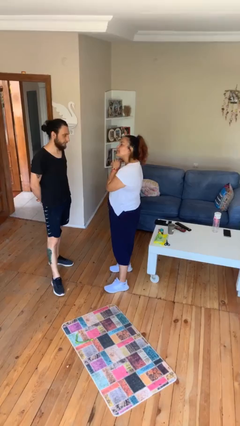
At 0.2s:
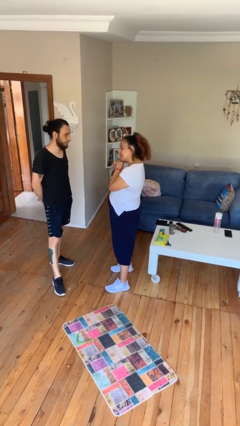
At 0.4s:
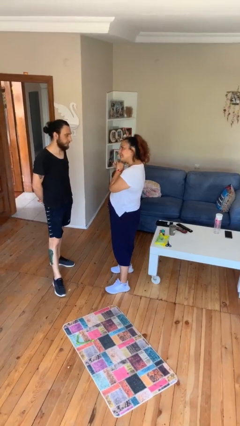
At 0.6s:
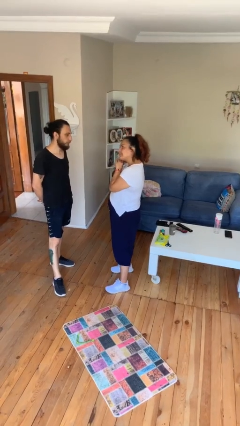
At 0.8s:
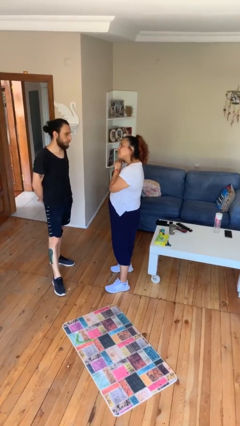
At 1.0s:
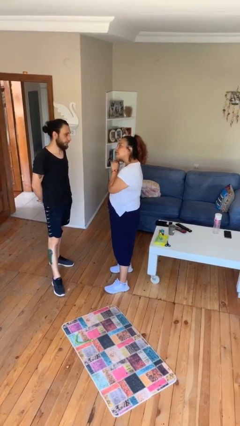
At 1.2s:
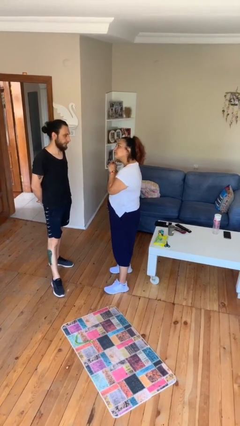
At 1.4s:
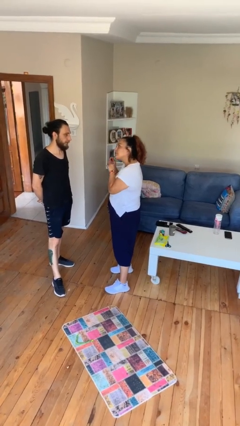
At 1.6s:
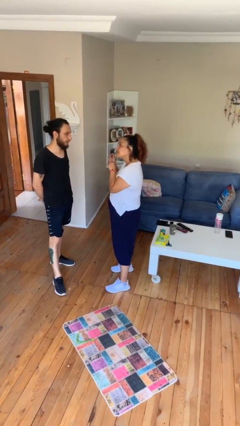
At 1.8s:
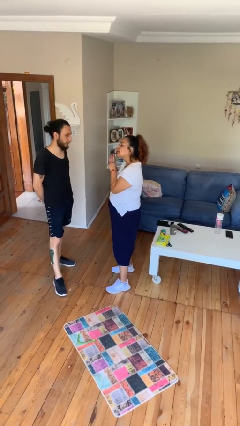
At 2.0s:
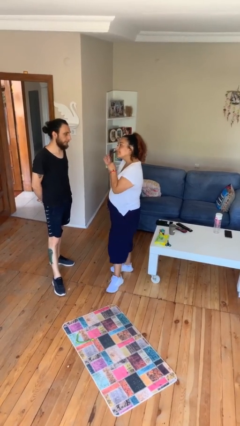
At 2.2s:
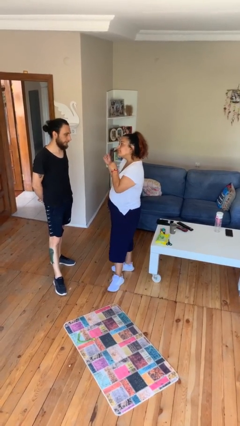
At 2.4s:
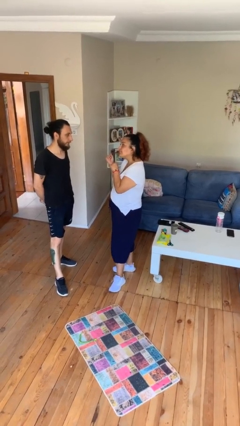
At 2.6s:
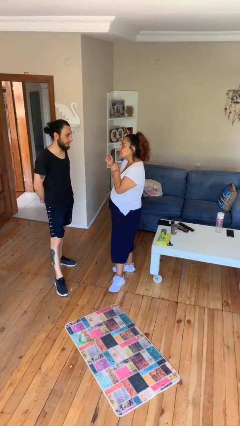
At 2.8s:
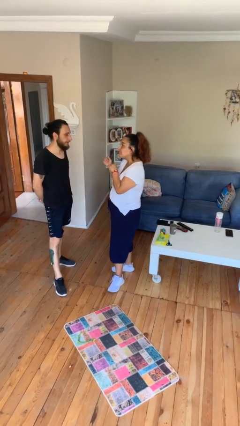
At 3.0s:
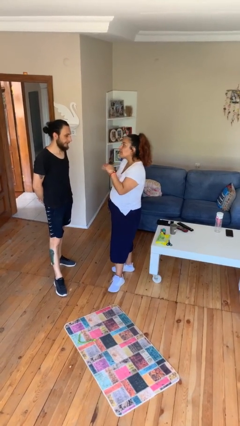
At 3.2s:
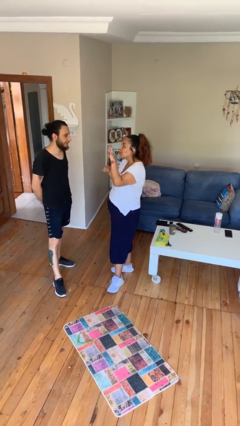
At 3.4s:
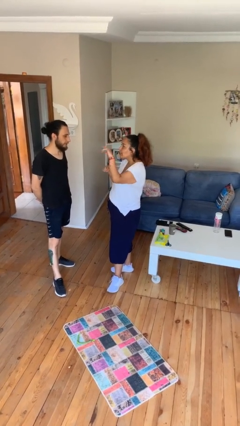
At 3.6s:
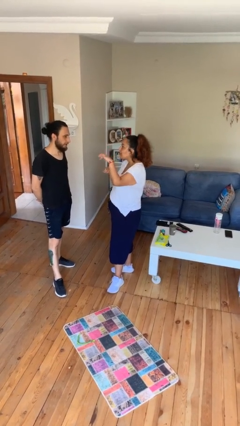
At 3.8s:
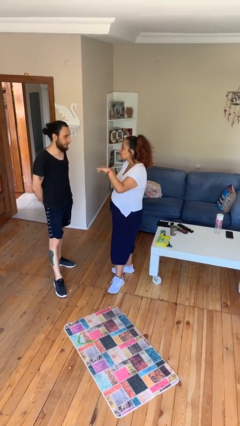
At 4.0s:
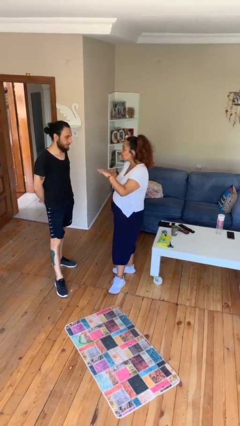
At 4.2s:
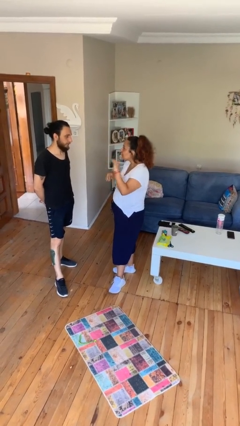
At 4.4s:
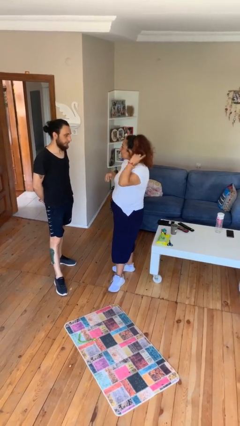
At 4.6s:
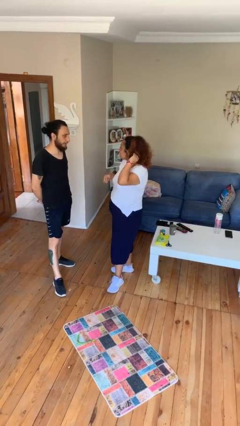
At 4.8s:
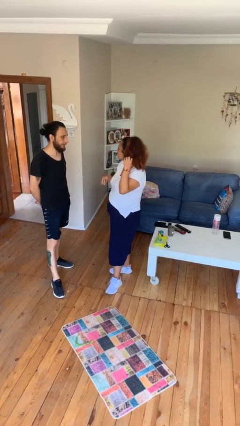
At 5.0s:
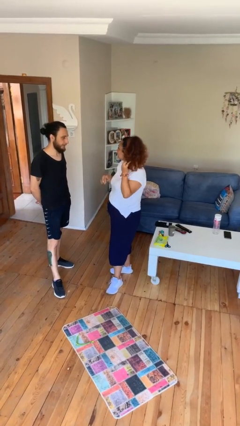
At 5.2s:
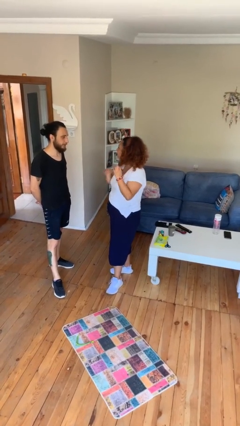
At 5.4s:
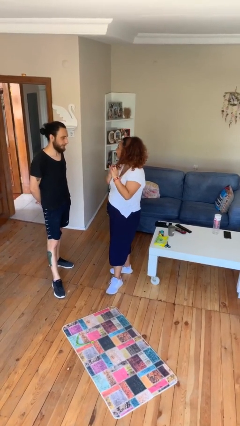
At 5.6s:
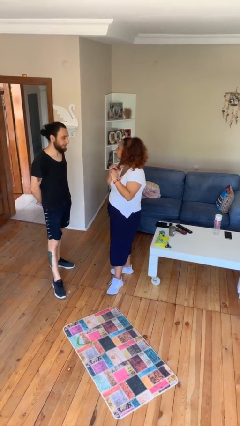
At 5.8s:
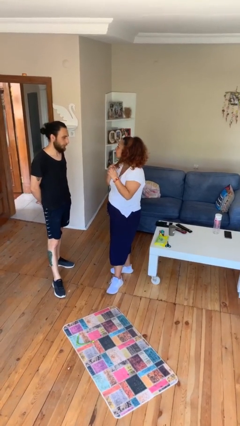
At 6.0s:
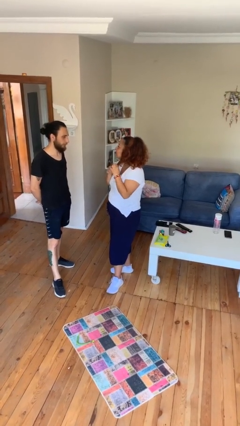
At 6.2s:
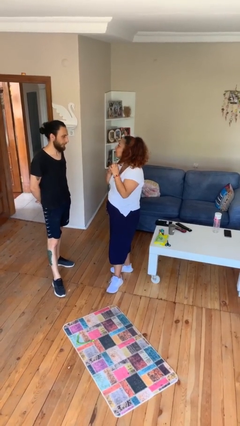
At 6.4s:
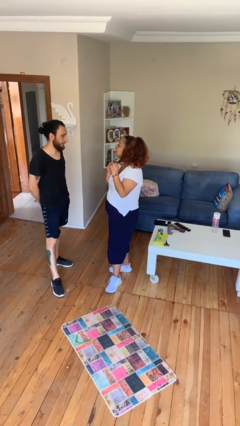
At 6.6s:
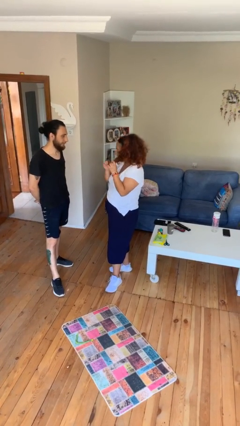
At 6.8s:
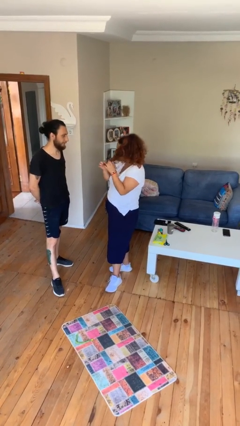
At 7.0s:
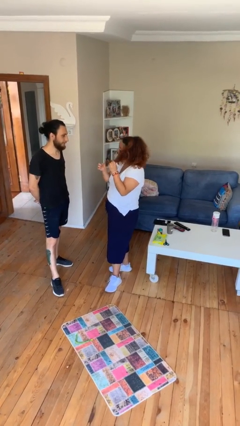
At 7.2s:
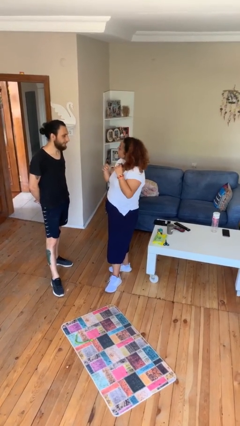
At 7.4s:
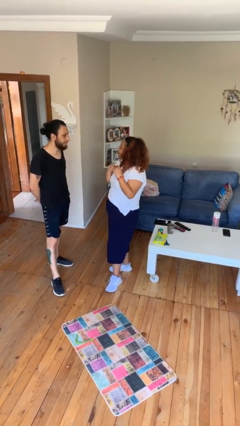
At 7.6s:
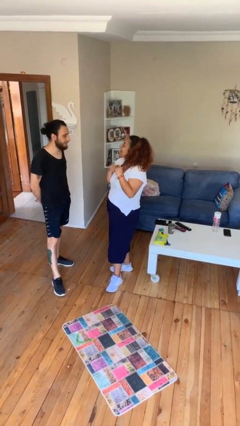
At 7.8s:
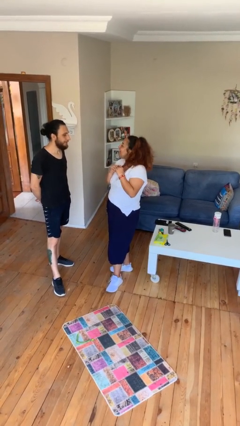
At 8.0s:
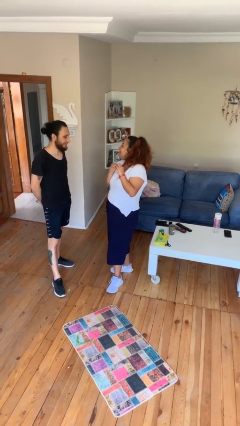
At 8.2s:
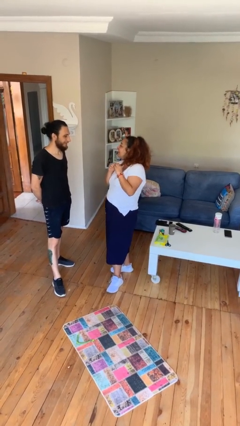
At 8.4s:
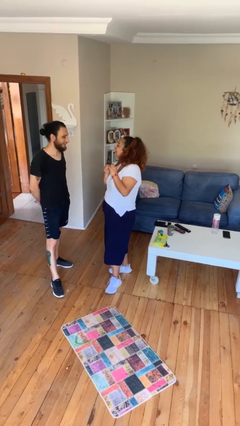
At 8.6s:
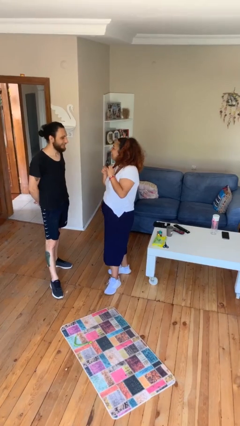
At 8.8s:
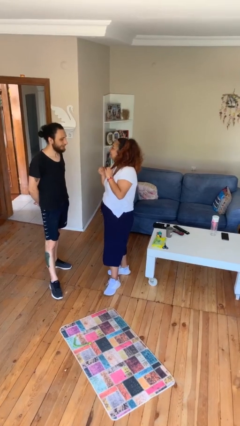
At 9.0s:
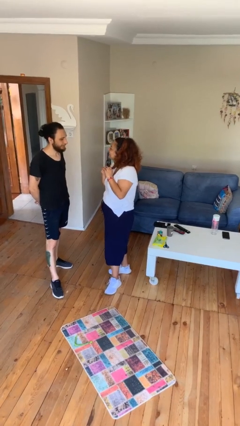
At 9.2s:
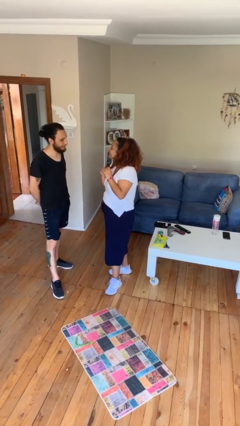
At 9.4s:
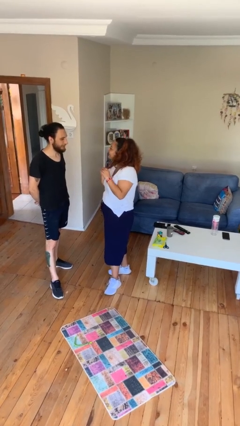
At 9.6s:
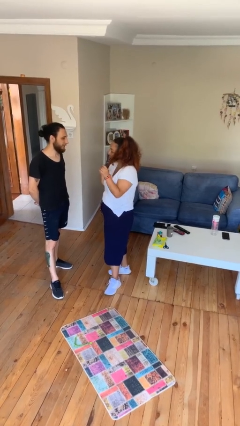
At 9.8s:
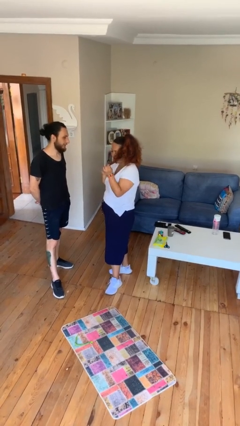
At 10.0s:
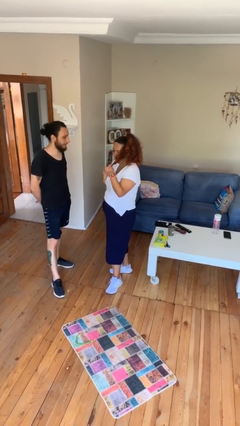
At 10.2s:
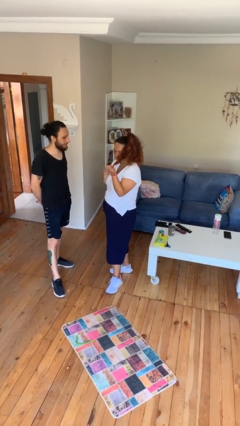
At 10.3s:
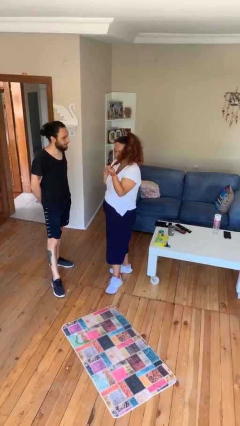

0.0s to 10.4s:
person talks to person

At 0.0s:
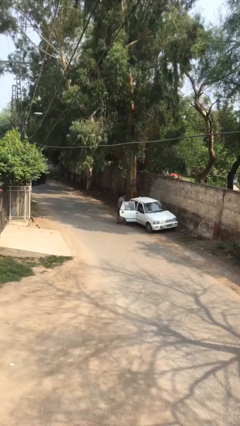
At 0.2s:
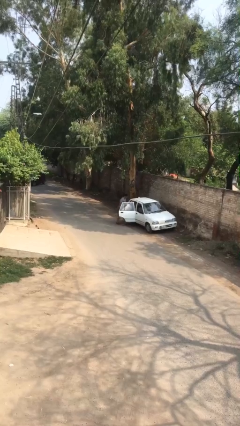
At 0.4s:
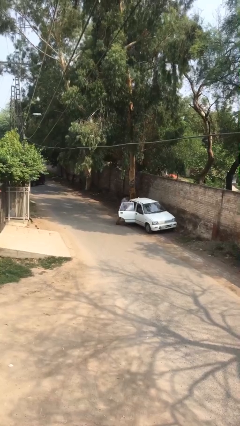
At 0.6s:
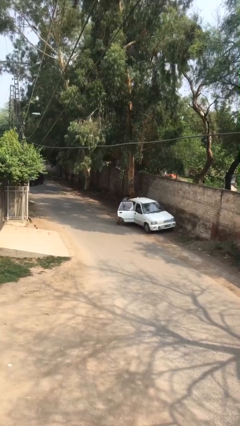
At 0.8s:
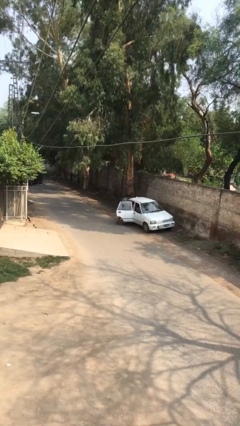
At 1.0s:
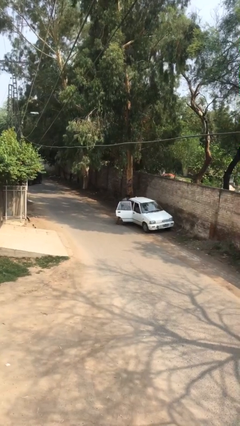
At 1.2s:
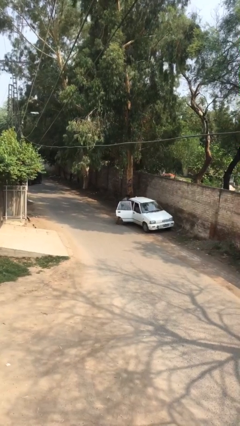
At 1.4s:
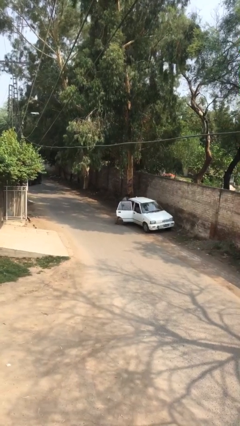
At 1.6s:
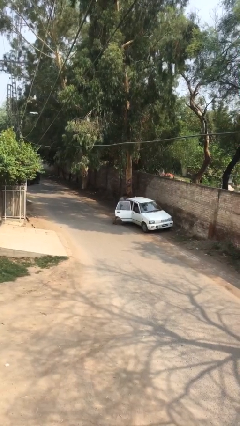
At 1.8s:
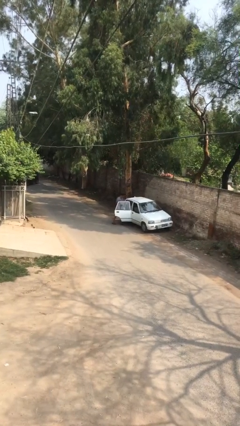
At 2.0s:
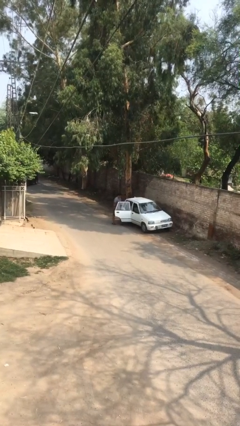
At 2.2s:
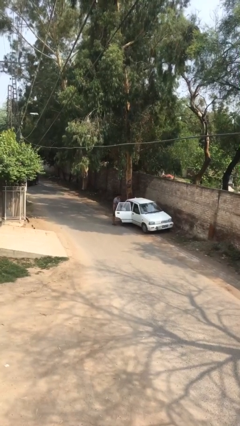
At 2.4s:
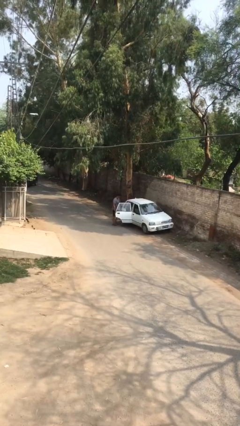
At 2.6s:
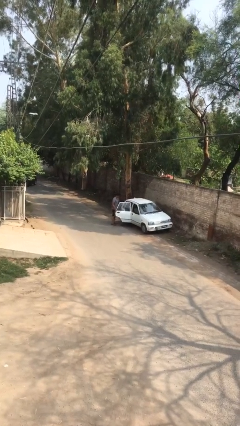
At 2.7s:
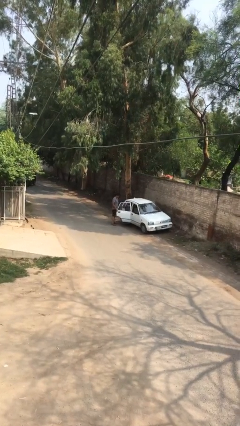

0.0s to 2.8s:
person loads car

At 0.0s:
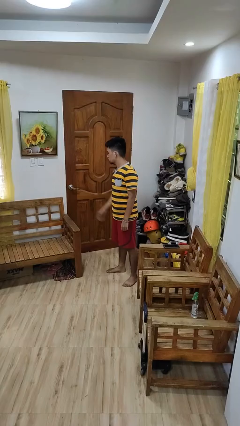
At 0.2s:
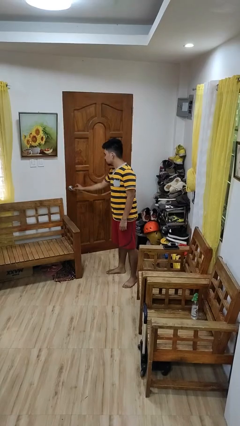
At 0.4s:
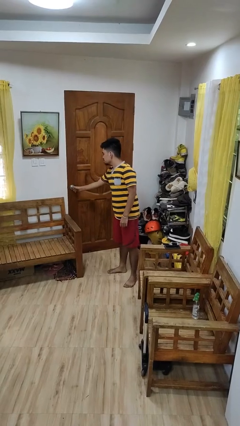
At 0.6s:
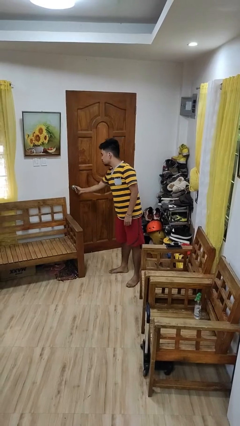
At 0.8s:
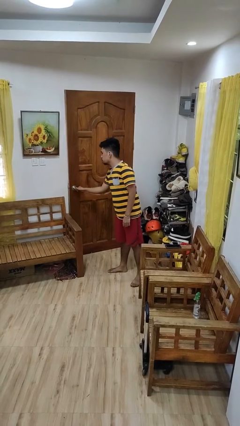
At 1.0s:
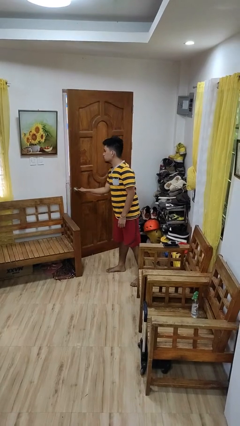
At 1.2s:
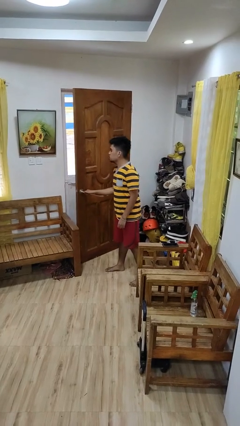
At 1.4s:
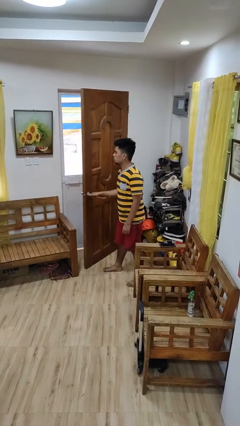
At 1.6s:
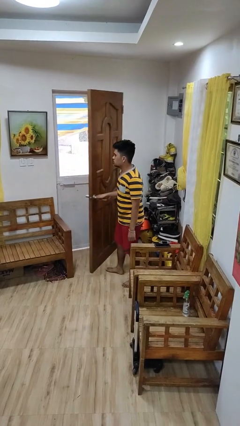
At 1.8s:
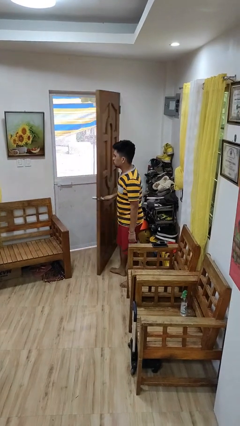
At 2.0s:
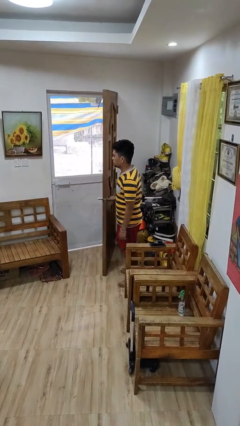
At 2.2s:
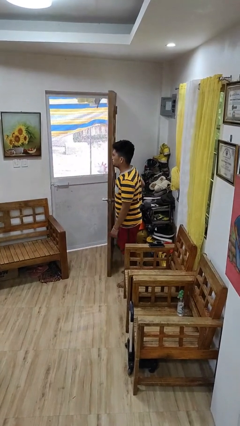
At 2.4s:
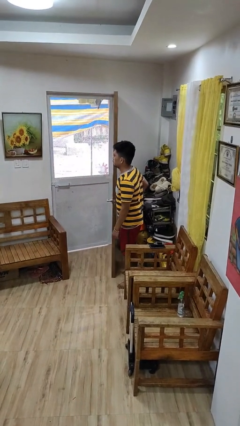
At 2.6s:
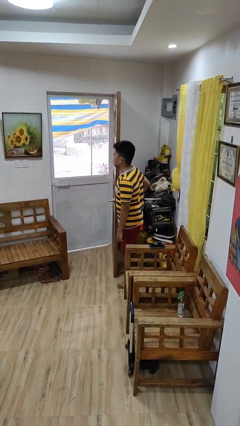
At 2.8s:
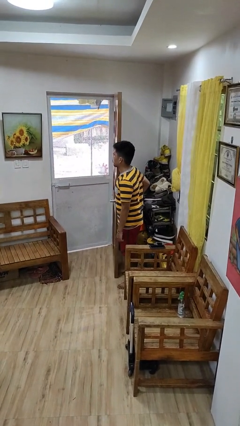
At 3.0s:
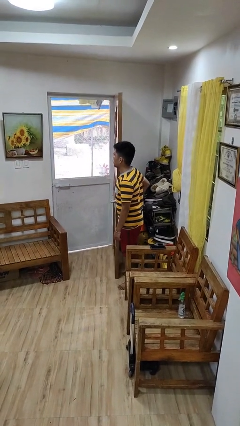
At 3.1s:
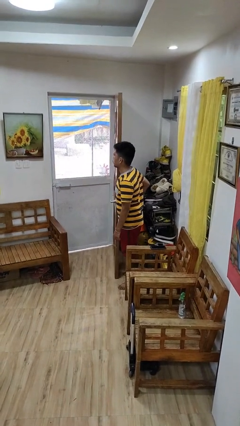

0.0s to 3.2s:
person opens facility door

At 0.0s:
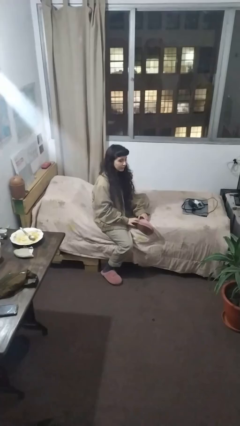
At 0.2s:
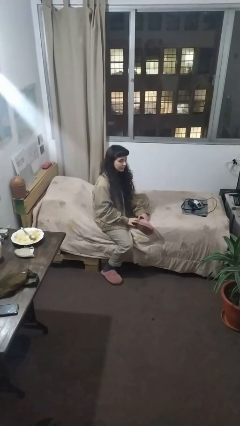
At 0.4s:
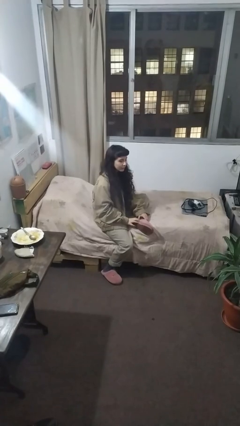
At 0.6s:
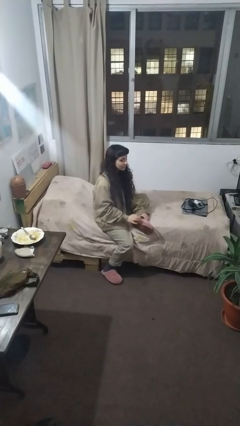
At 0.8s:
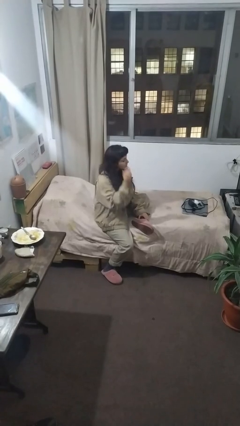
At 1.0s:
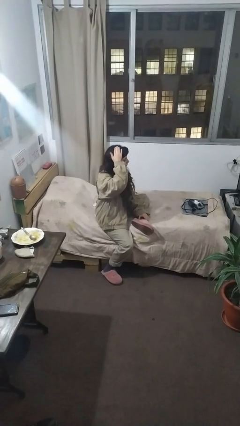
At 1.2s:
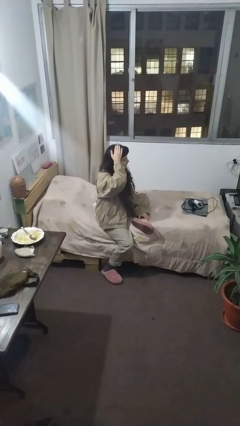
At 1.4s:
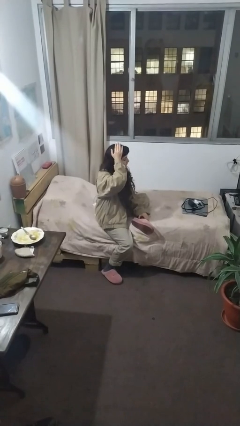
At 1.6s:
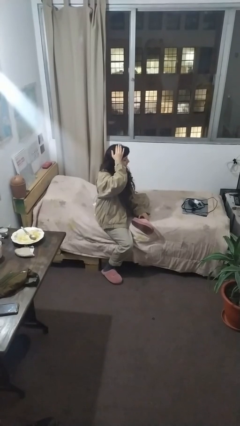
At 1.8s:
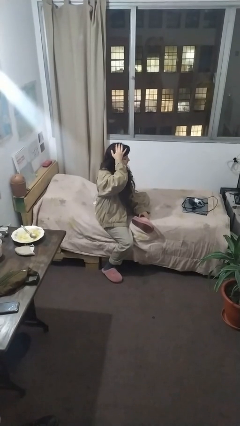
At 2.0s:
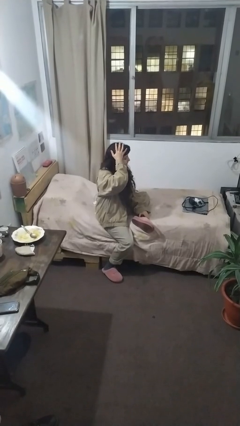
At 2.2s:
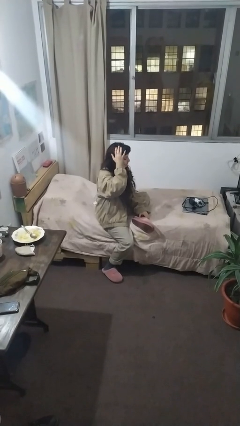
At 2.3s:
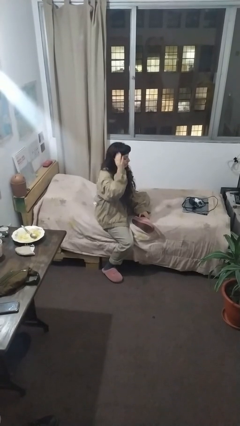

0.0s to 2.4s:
person pats head
